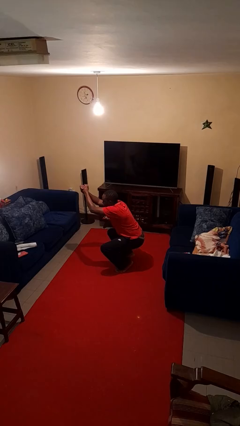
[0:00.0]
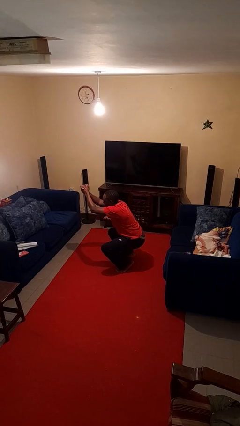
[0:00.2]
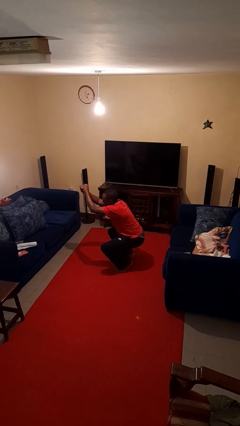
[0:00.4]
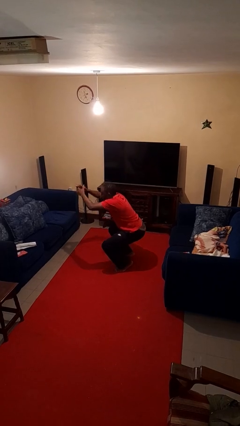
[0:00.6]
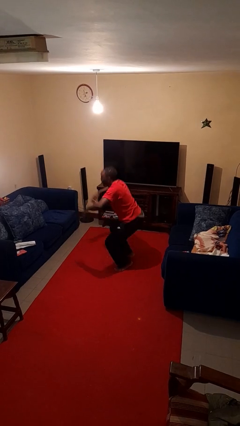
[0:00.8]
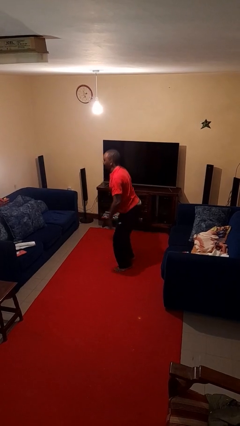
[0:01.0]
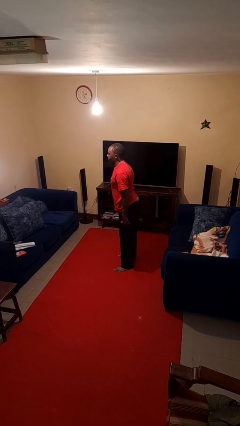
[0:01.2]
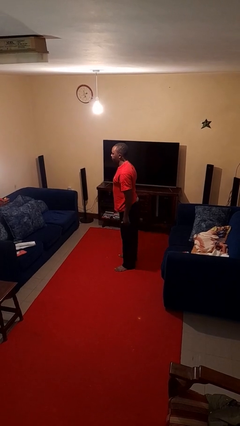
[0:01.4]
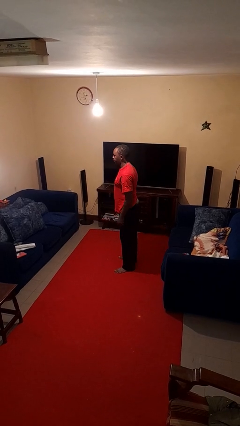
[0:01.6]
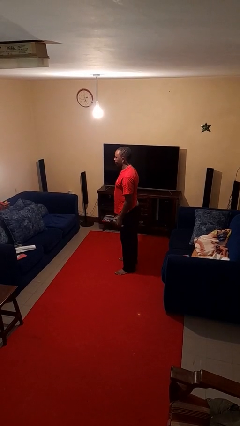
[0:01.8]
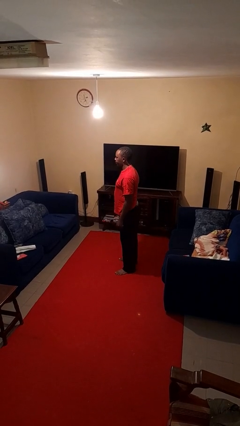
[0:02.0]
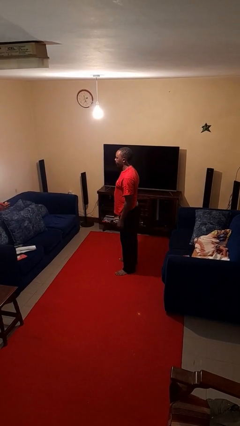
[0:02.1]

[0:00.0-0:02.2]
person stands up

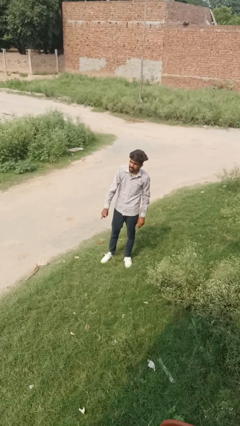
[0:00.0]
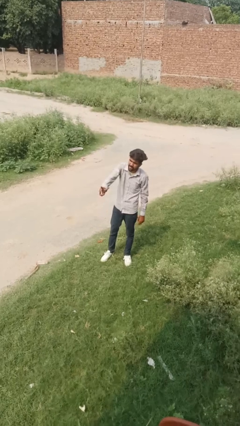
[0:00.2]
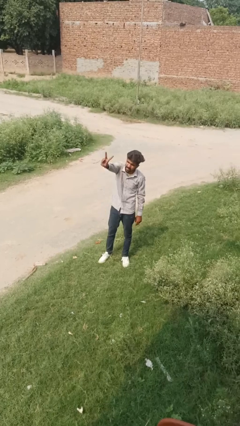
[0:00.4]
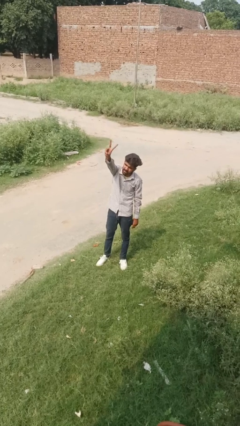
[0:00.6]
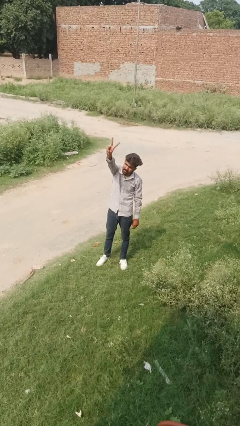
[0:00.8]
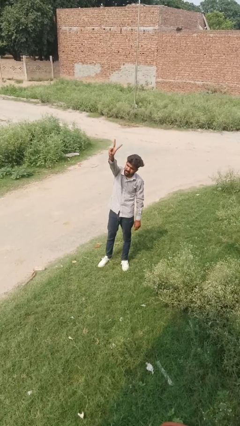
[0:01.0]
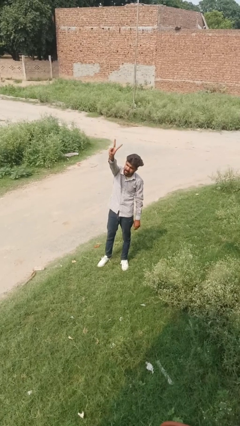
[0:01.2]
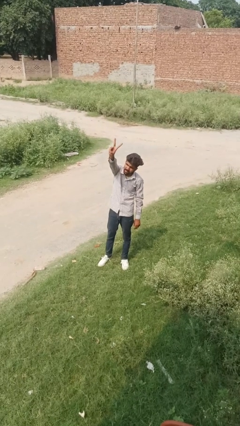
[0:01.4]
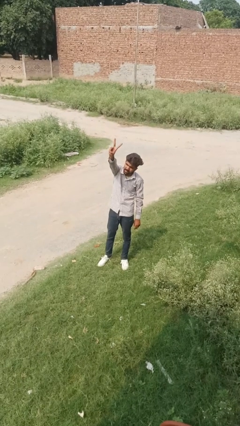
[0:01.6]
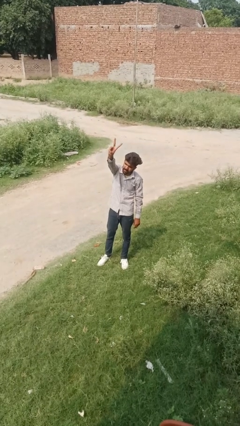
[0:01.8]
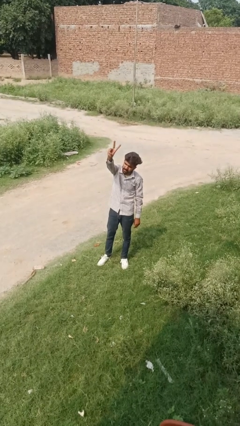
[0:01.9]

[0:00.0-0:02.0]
person gestures peace

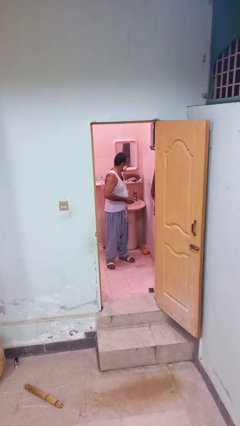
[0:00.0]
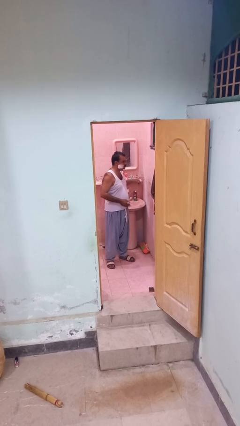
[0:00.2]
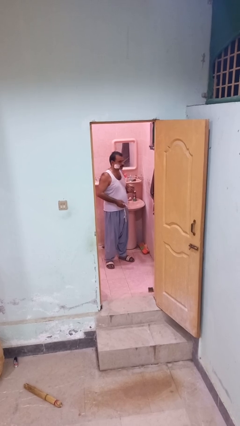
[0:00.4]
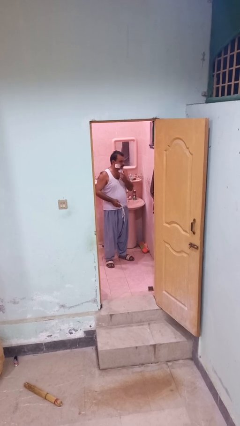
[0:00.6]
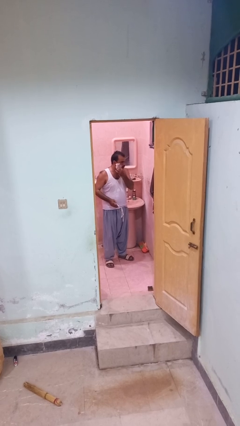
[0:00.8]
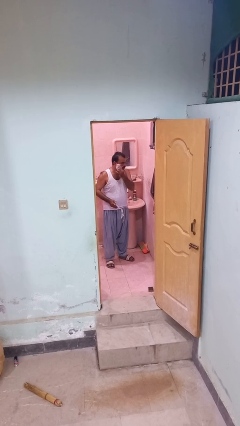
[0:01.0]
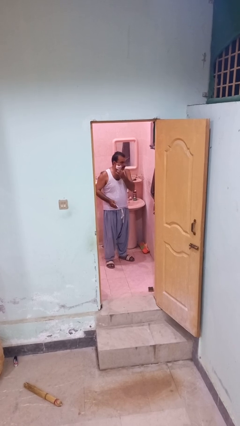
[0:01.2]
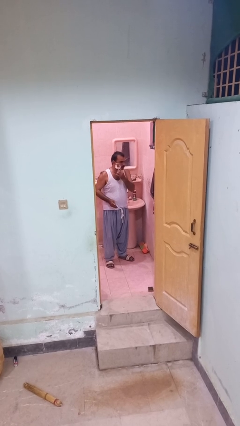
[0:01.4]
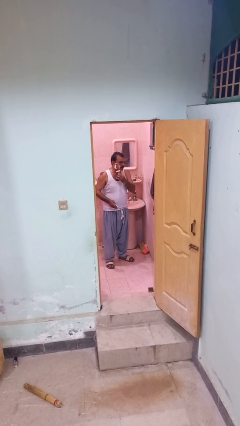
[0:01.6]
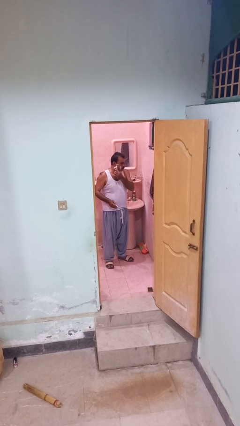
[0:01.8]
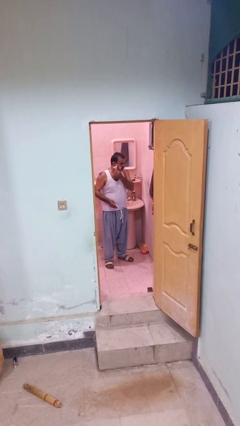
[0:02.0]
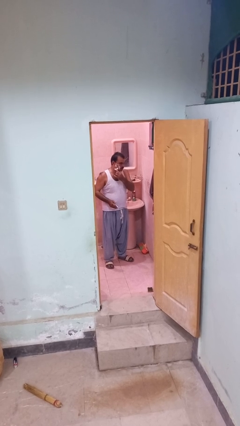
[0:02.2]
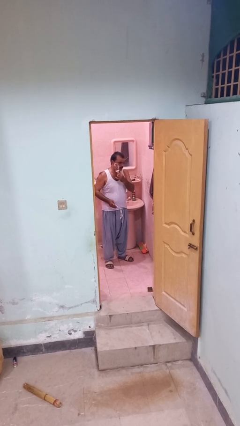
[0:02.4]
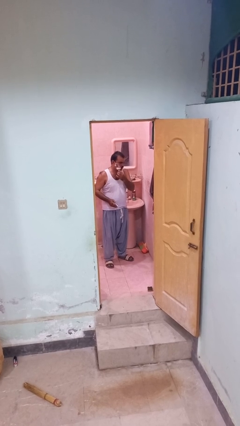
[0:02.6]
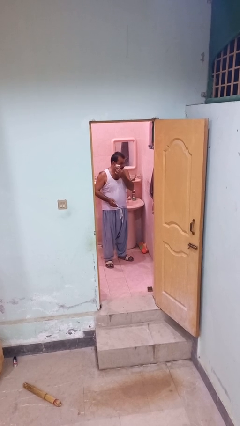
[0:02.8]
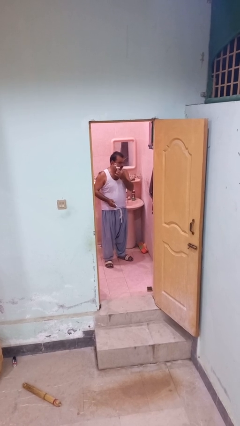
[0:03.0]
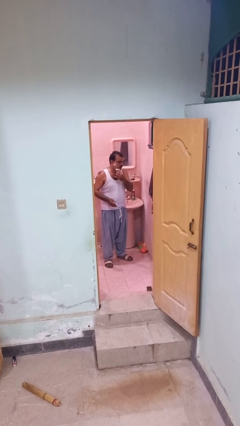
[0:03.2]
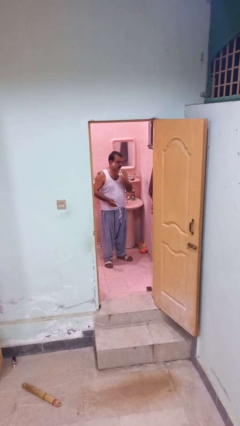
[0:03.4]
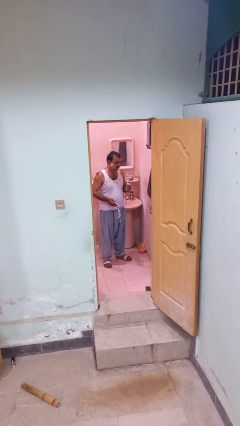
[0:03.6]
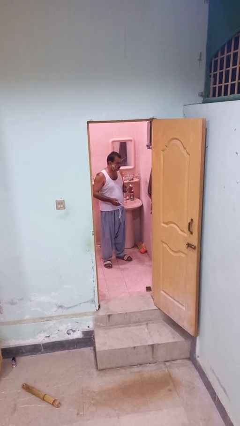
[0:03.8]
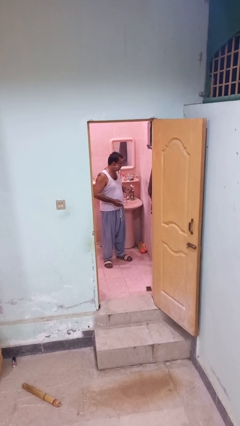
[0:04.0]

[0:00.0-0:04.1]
person shaves face

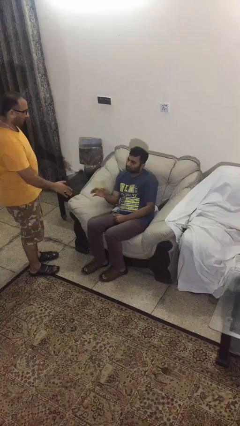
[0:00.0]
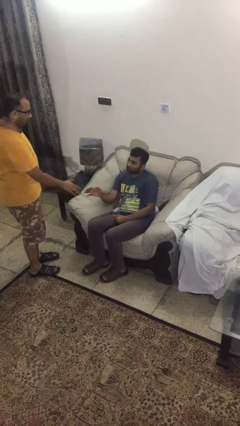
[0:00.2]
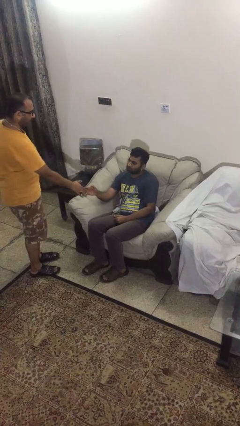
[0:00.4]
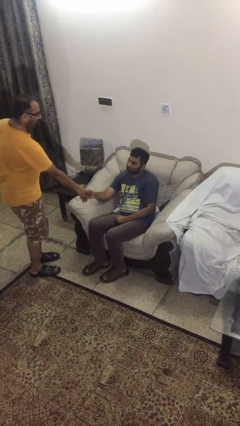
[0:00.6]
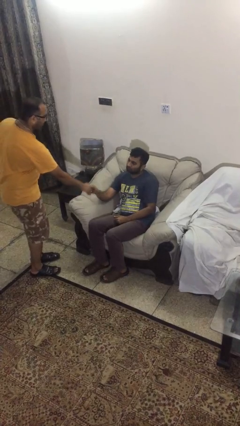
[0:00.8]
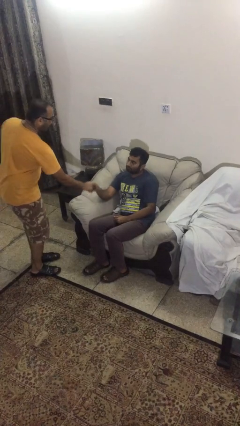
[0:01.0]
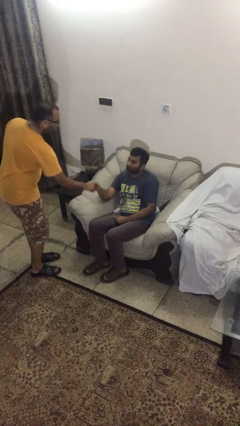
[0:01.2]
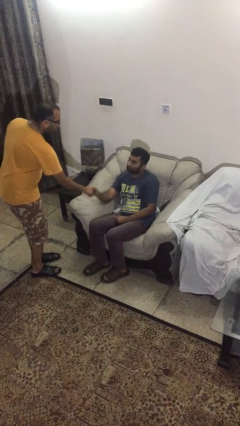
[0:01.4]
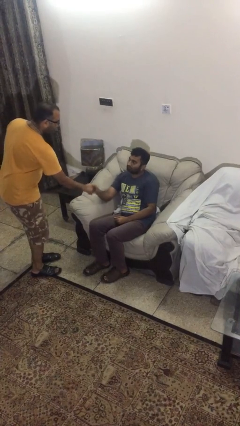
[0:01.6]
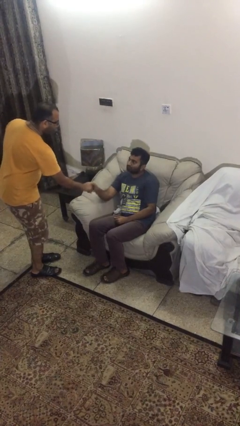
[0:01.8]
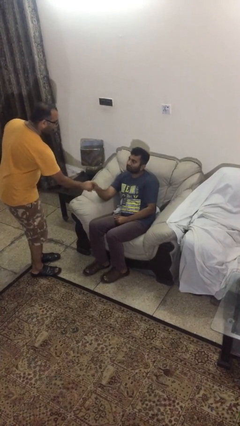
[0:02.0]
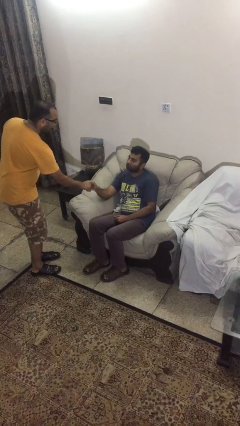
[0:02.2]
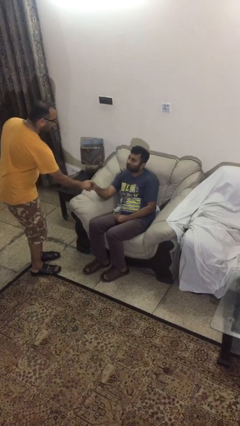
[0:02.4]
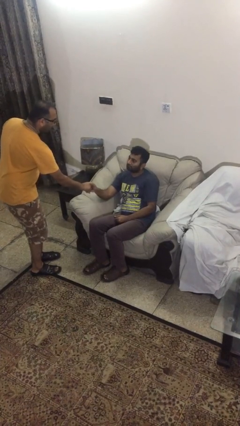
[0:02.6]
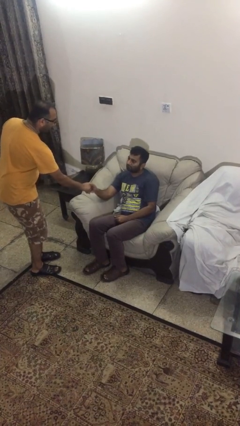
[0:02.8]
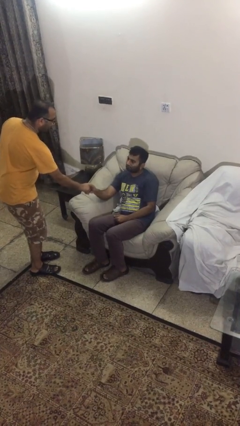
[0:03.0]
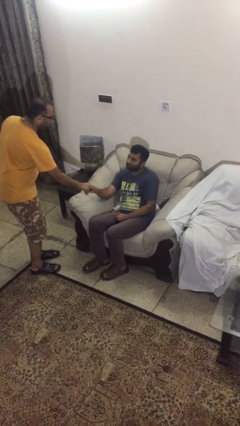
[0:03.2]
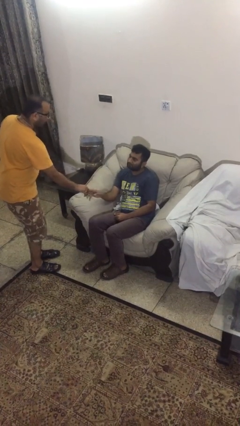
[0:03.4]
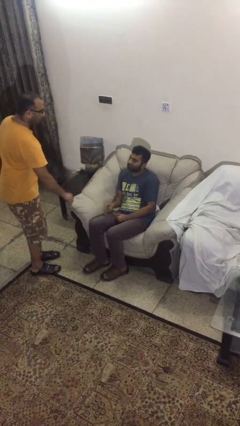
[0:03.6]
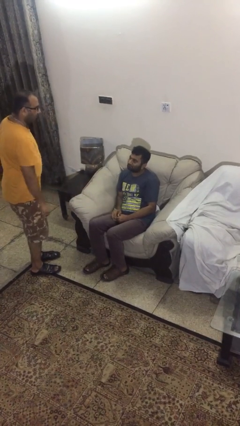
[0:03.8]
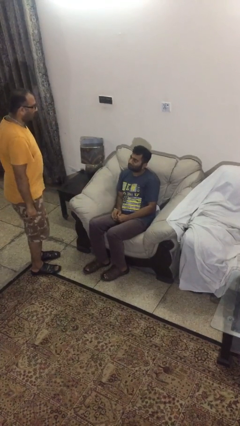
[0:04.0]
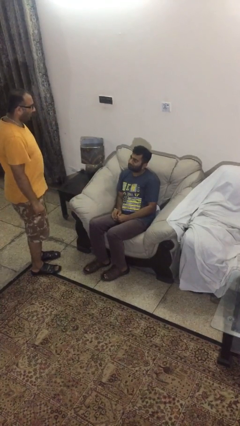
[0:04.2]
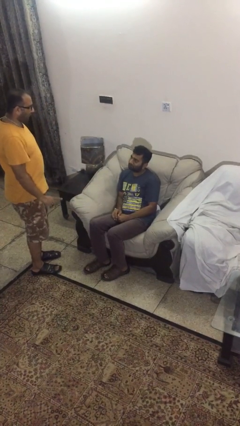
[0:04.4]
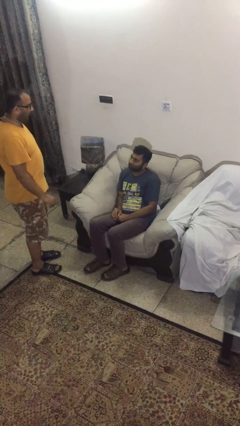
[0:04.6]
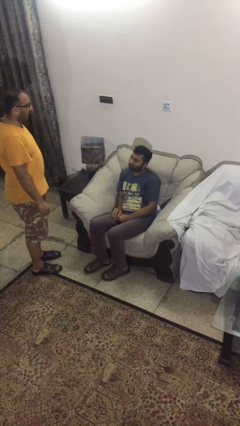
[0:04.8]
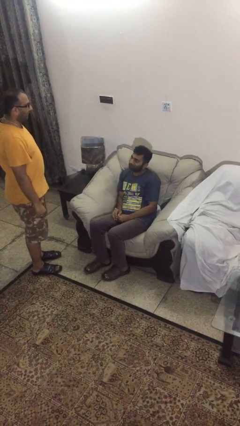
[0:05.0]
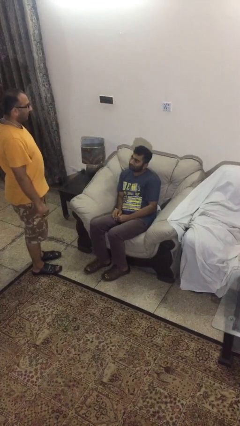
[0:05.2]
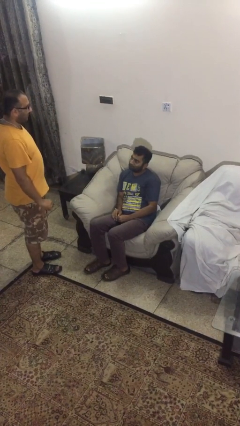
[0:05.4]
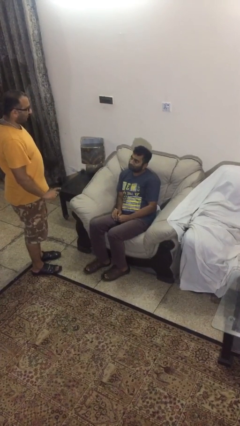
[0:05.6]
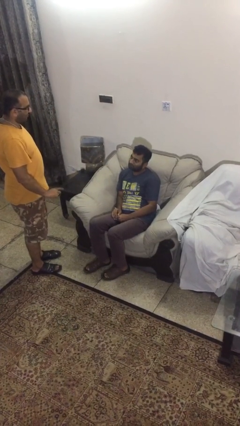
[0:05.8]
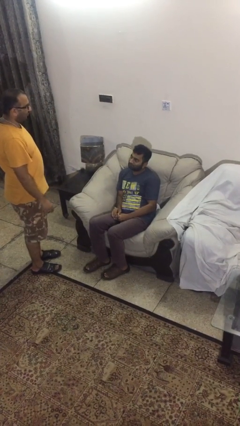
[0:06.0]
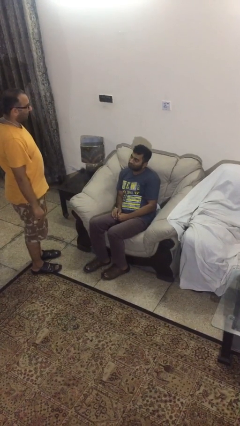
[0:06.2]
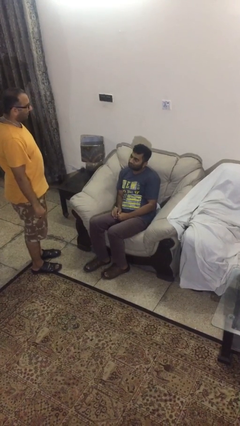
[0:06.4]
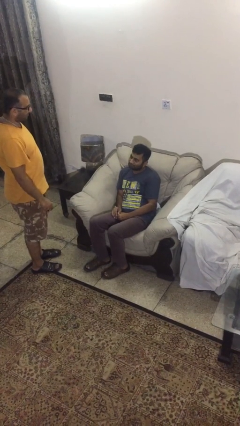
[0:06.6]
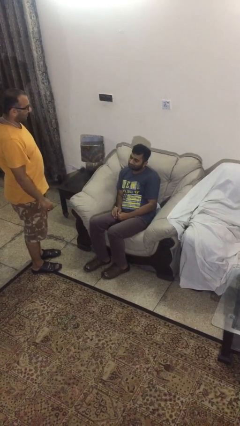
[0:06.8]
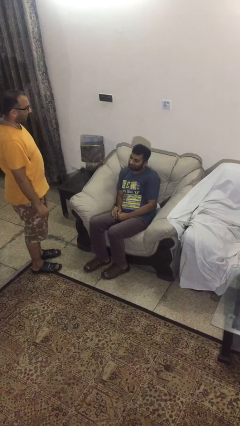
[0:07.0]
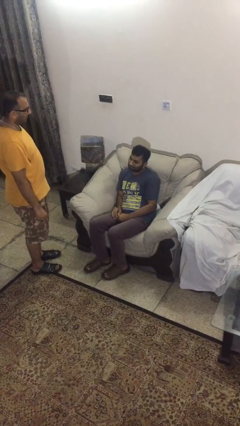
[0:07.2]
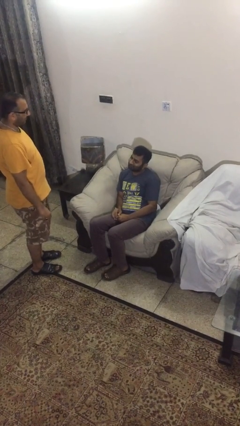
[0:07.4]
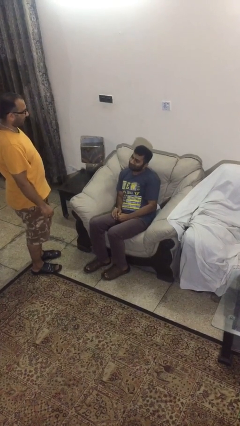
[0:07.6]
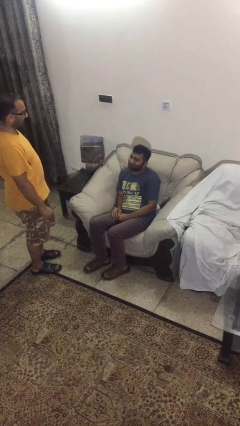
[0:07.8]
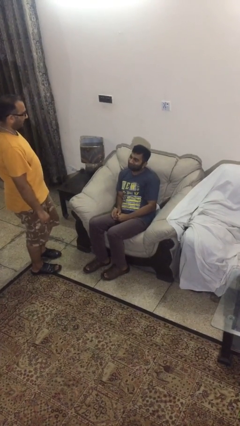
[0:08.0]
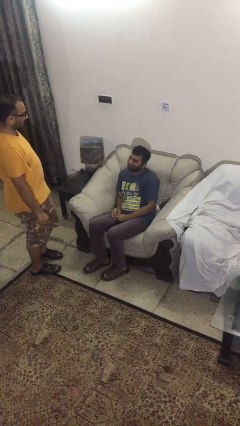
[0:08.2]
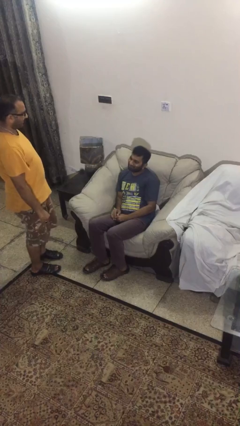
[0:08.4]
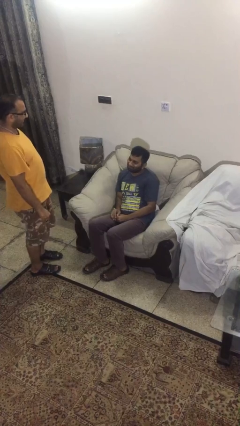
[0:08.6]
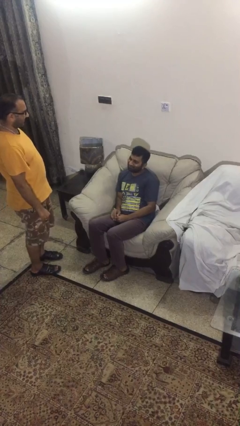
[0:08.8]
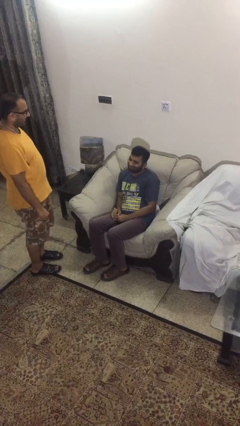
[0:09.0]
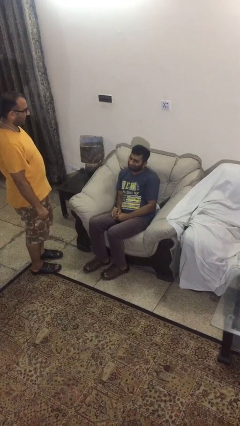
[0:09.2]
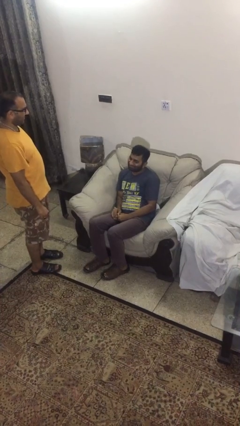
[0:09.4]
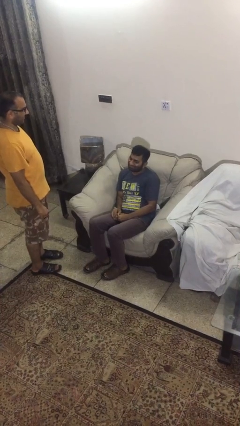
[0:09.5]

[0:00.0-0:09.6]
person shakes hand
